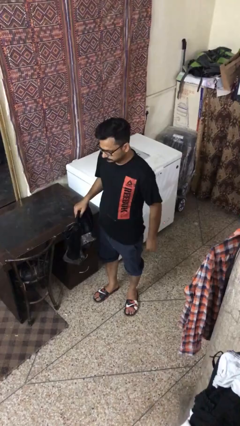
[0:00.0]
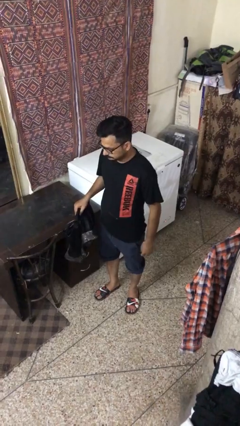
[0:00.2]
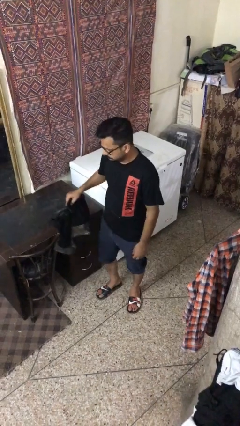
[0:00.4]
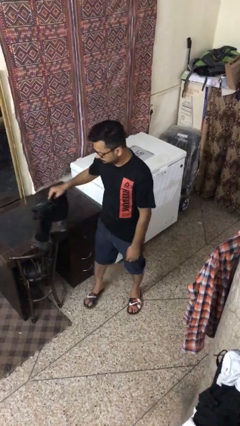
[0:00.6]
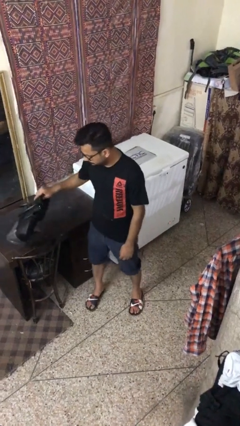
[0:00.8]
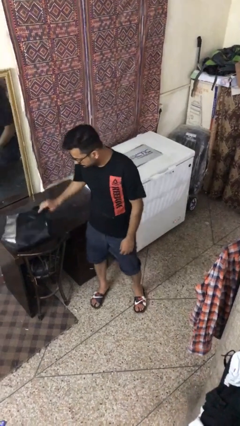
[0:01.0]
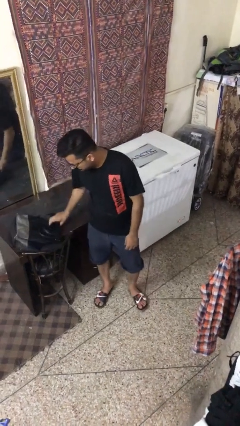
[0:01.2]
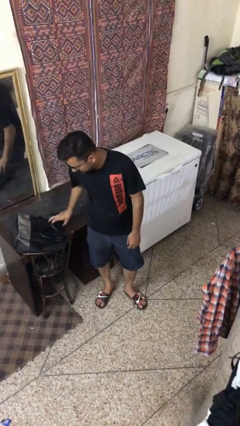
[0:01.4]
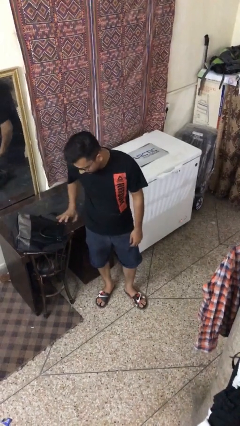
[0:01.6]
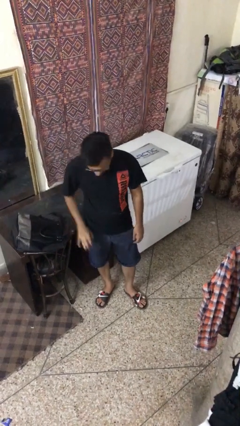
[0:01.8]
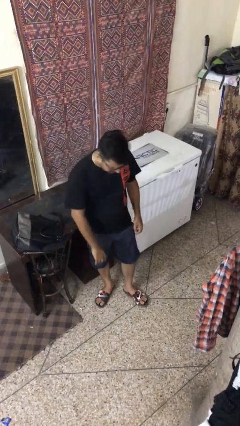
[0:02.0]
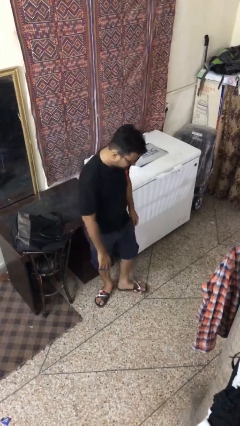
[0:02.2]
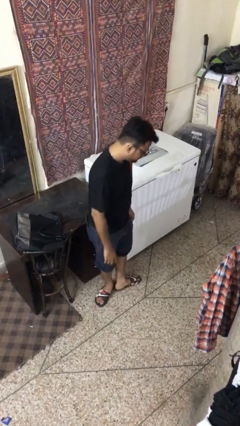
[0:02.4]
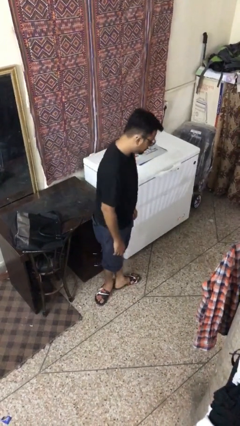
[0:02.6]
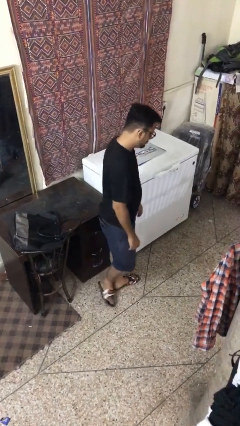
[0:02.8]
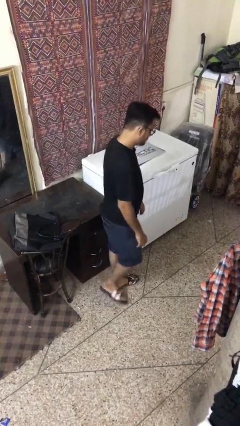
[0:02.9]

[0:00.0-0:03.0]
person puts down object on table

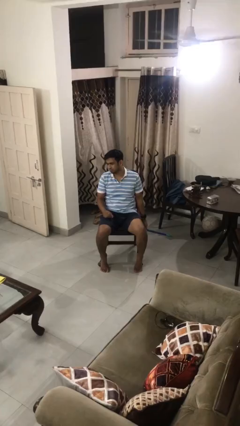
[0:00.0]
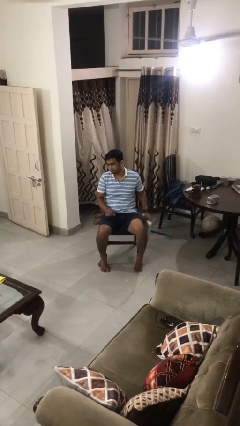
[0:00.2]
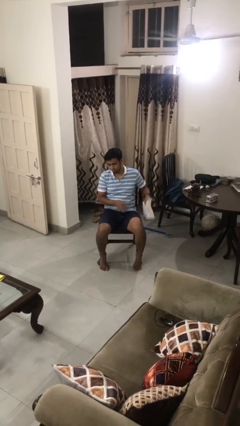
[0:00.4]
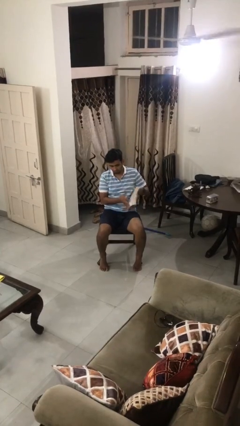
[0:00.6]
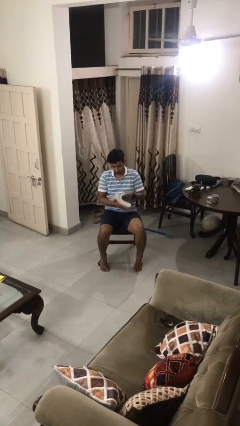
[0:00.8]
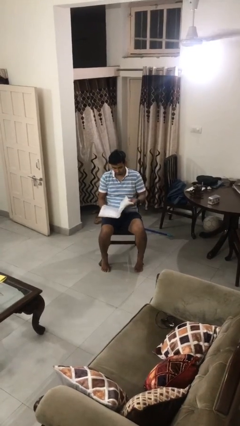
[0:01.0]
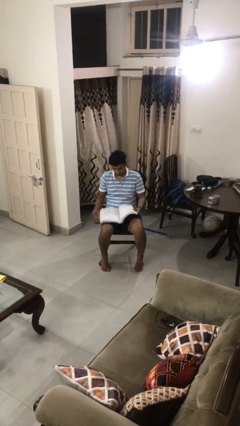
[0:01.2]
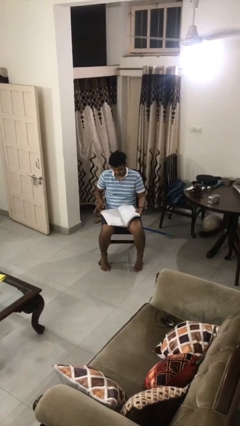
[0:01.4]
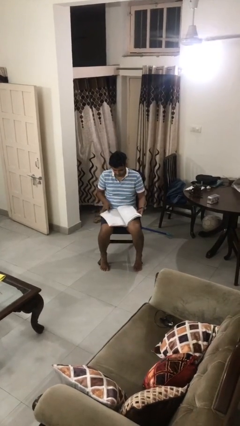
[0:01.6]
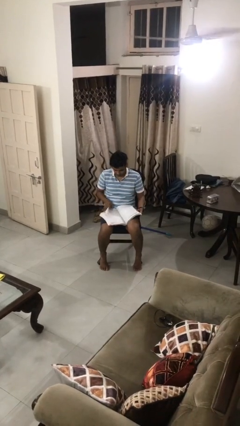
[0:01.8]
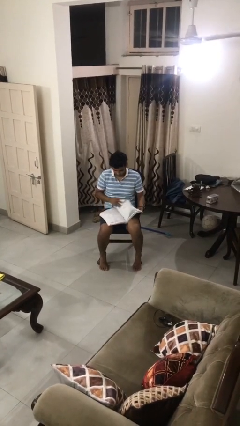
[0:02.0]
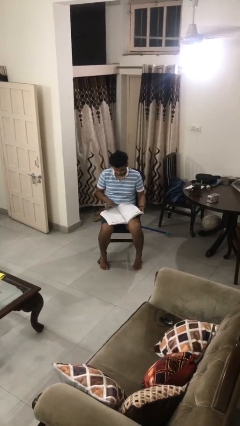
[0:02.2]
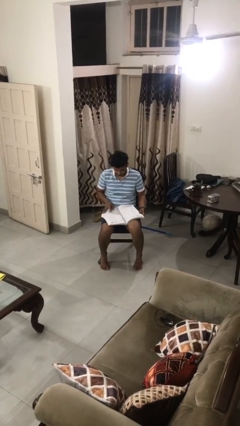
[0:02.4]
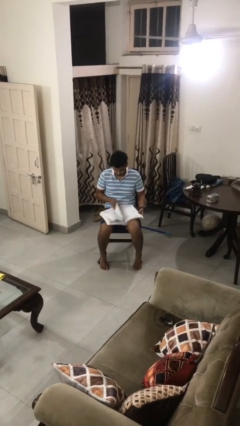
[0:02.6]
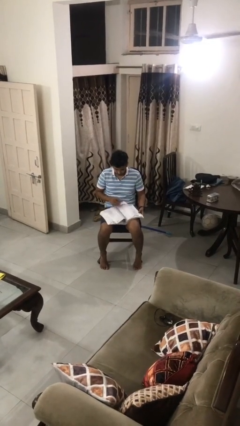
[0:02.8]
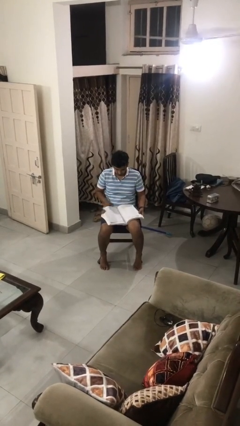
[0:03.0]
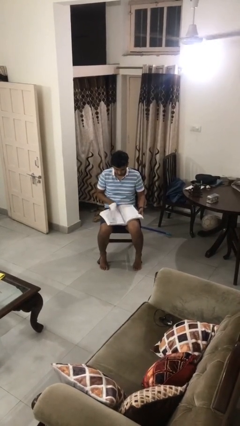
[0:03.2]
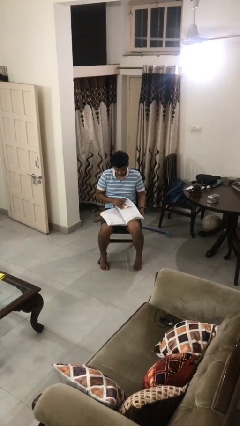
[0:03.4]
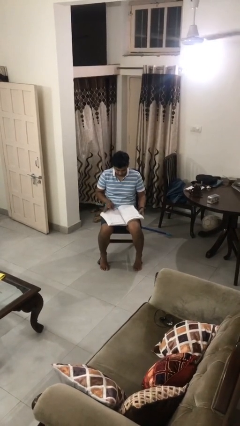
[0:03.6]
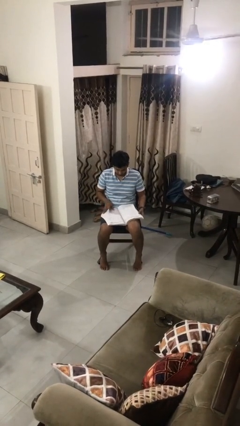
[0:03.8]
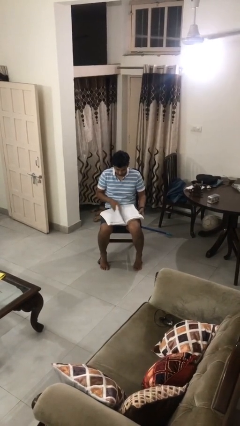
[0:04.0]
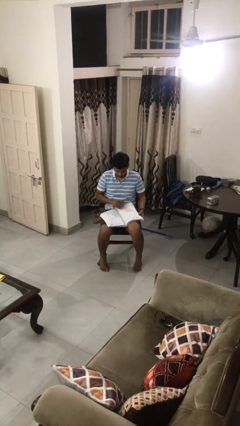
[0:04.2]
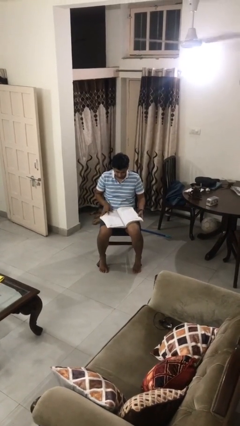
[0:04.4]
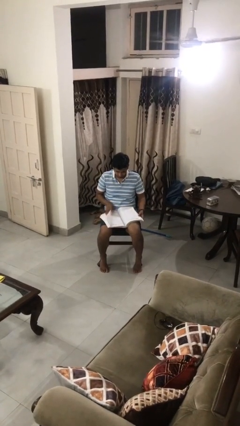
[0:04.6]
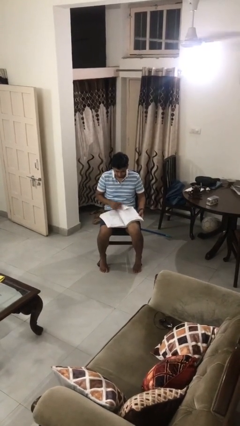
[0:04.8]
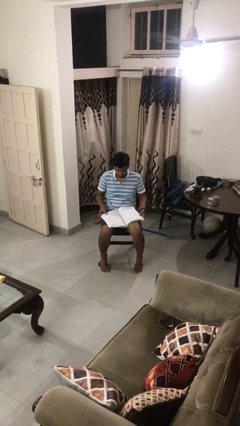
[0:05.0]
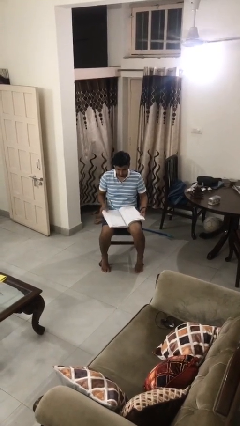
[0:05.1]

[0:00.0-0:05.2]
person reads book

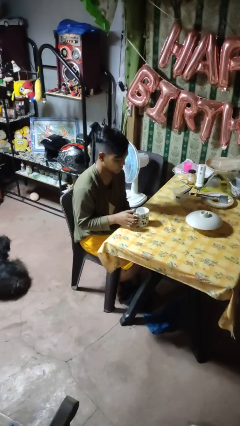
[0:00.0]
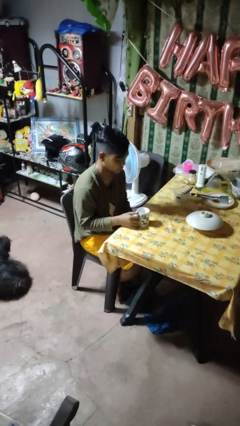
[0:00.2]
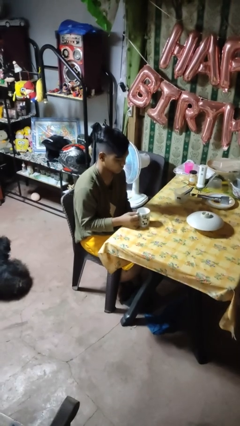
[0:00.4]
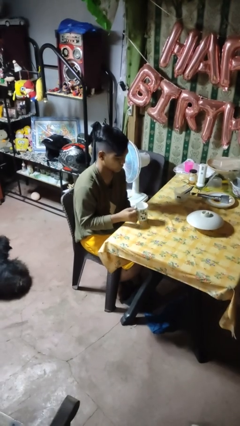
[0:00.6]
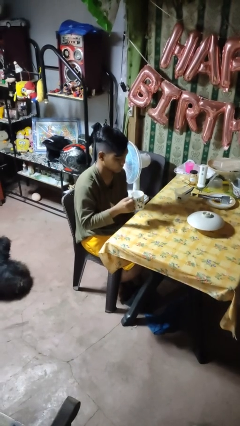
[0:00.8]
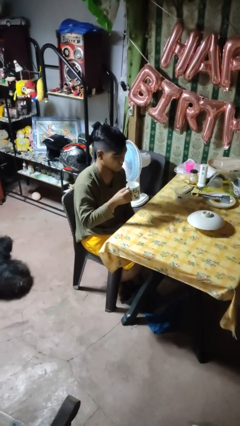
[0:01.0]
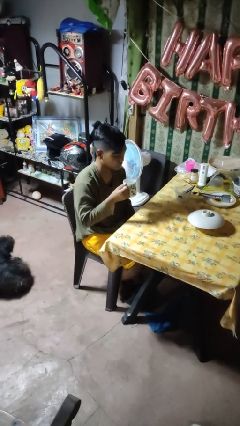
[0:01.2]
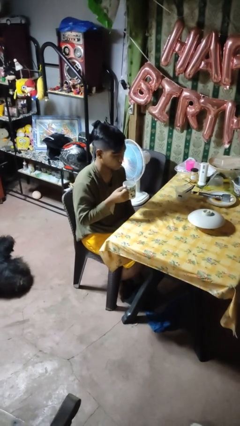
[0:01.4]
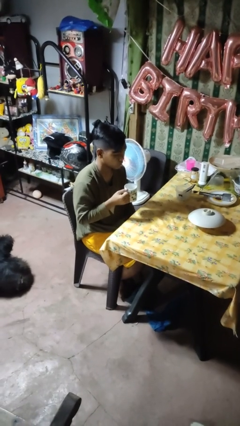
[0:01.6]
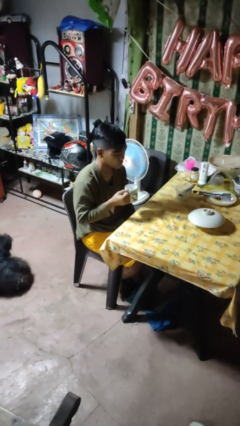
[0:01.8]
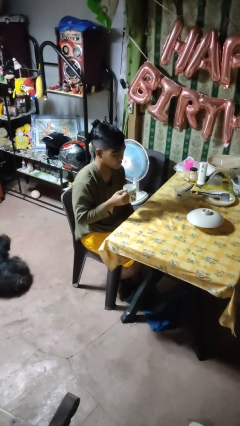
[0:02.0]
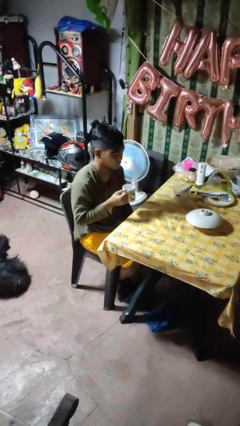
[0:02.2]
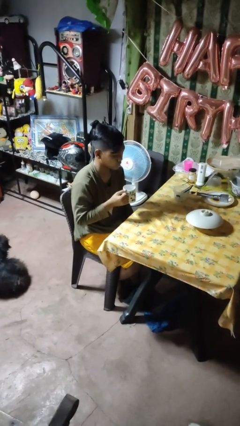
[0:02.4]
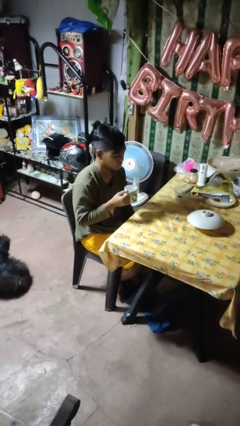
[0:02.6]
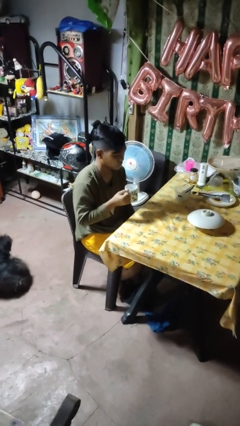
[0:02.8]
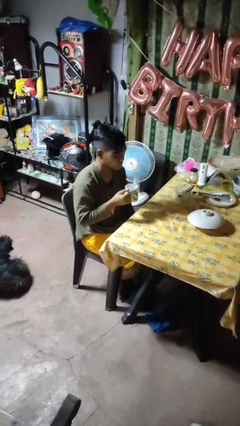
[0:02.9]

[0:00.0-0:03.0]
person picks up object from table

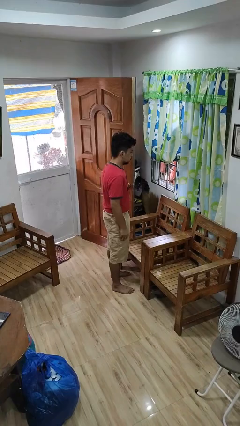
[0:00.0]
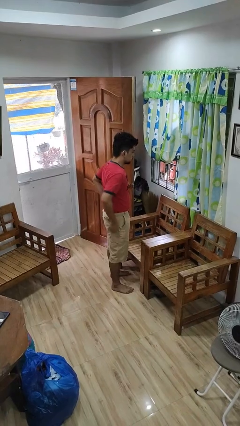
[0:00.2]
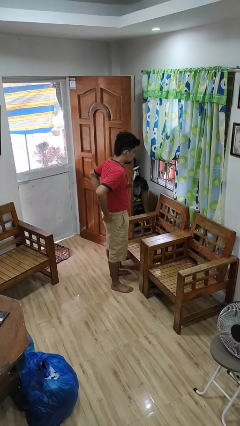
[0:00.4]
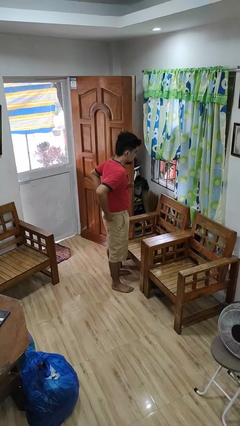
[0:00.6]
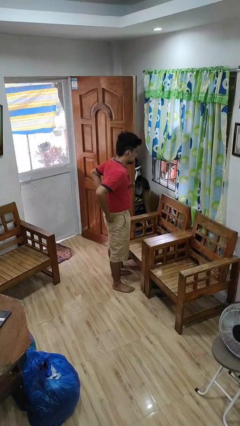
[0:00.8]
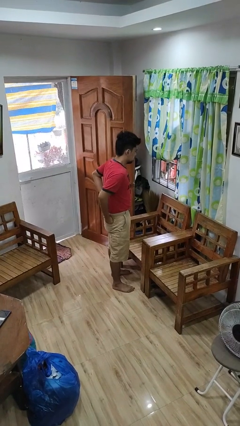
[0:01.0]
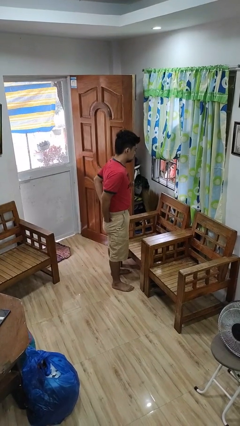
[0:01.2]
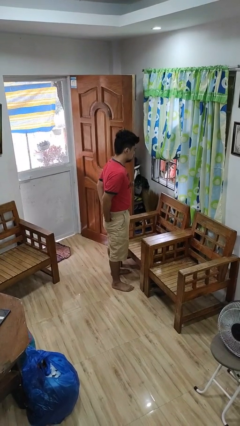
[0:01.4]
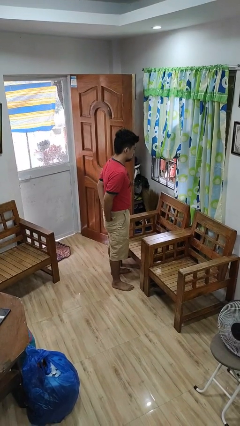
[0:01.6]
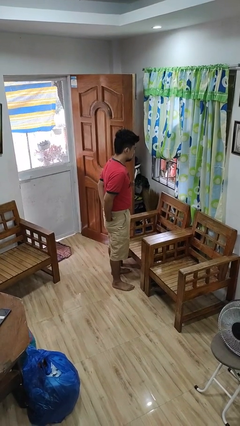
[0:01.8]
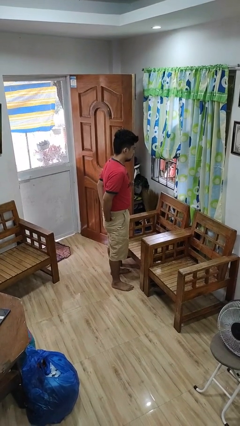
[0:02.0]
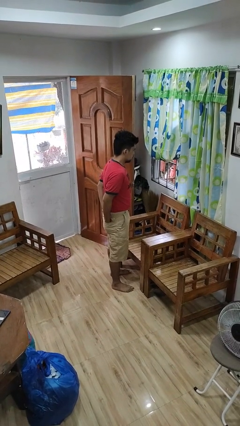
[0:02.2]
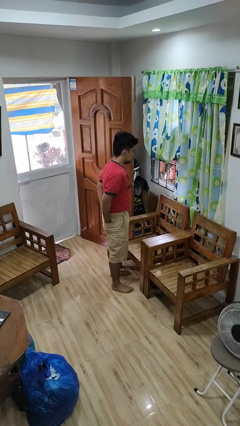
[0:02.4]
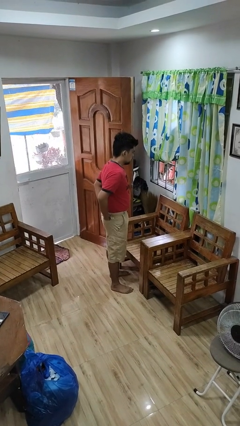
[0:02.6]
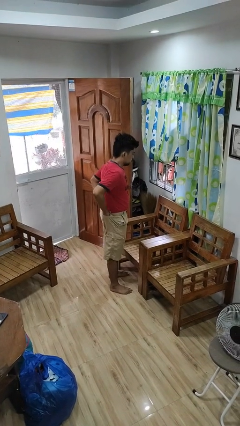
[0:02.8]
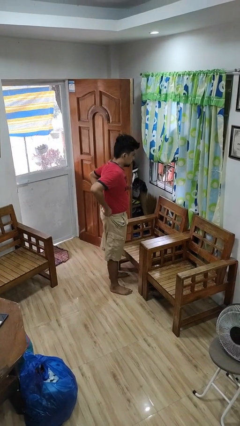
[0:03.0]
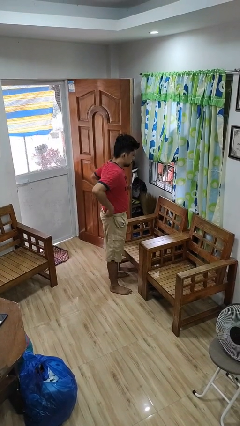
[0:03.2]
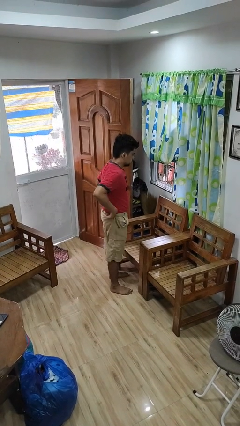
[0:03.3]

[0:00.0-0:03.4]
person puts hands in back pockets

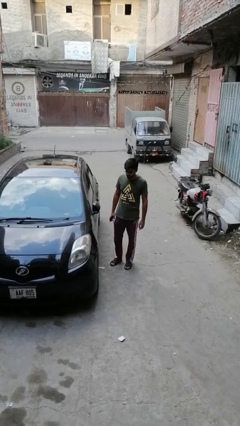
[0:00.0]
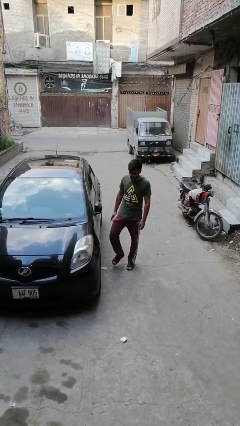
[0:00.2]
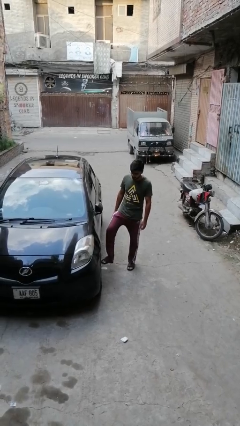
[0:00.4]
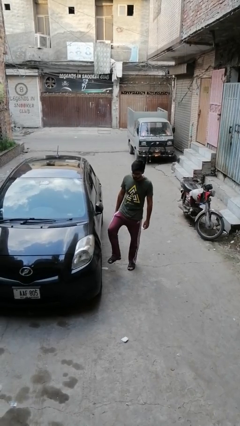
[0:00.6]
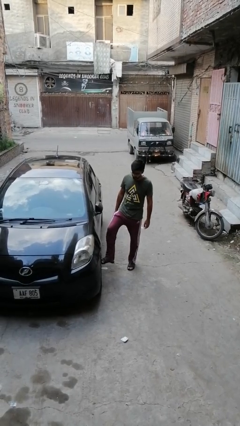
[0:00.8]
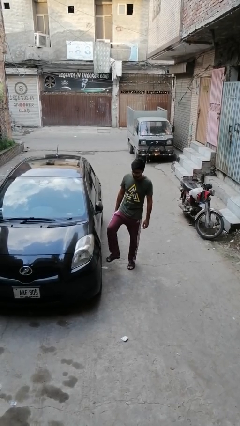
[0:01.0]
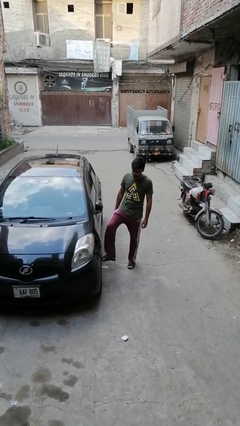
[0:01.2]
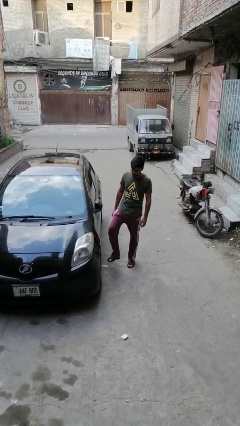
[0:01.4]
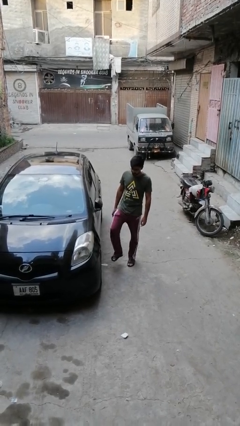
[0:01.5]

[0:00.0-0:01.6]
person kicks car tires

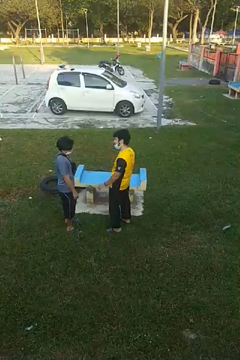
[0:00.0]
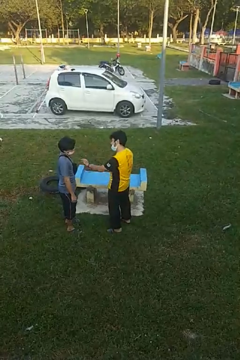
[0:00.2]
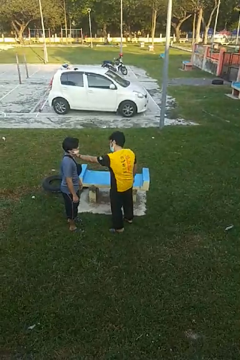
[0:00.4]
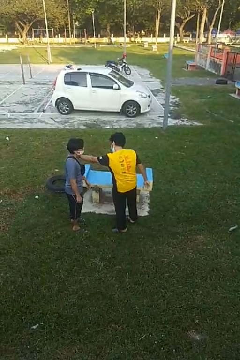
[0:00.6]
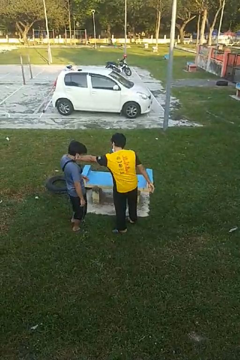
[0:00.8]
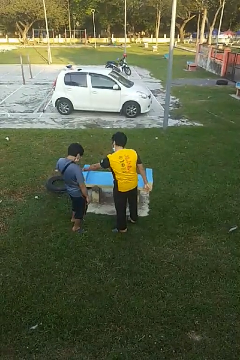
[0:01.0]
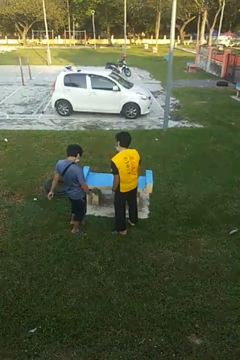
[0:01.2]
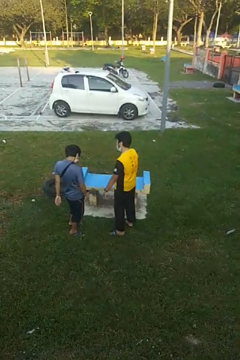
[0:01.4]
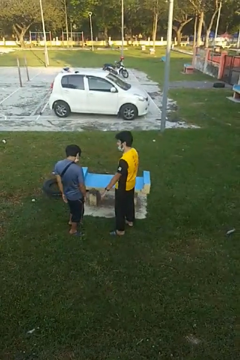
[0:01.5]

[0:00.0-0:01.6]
person shoves person
